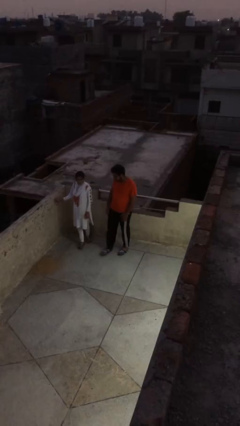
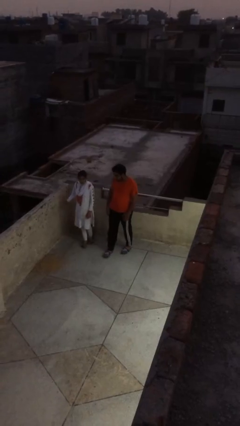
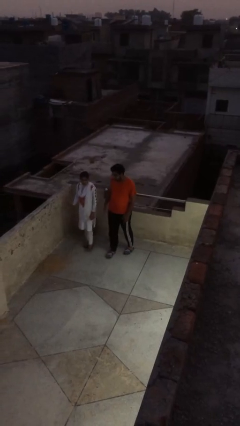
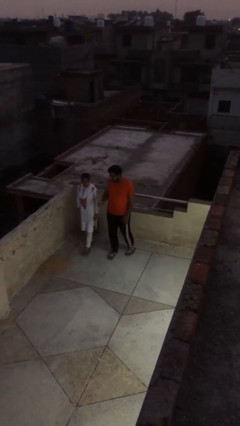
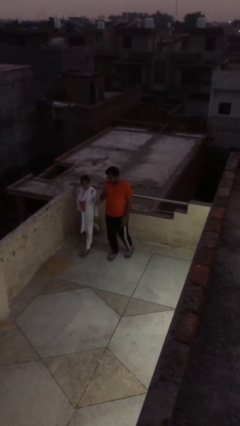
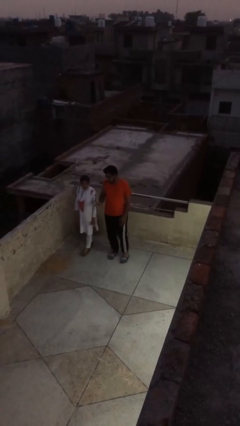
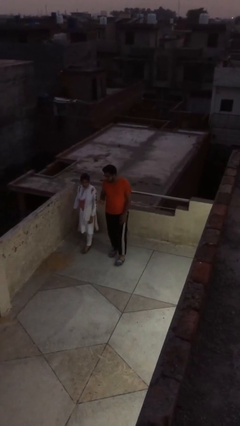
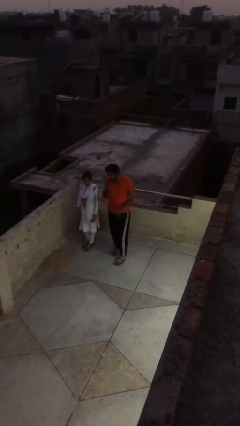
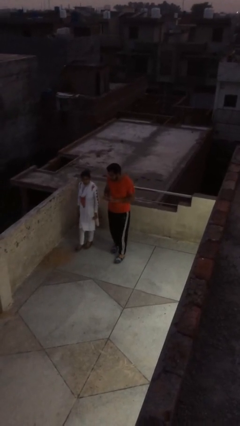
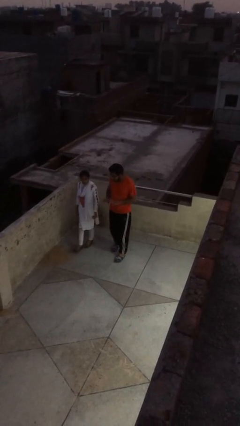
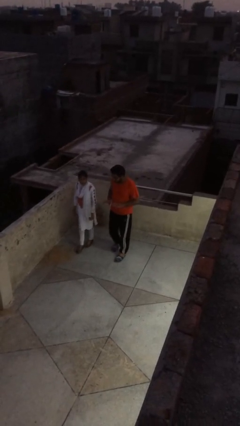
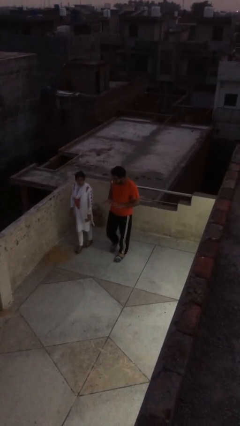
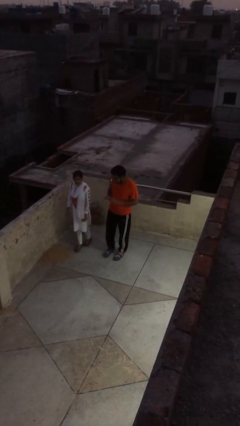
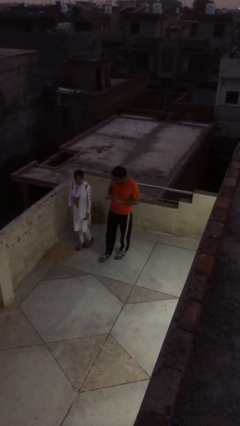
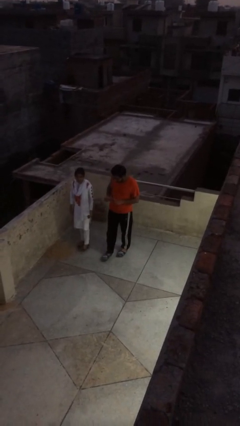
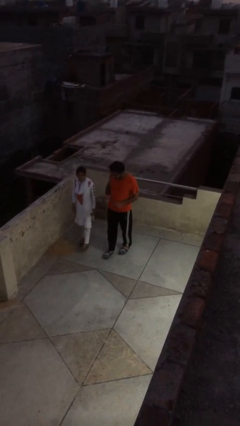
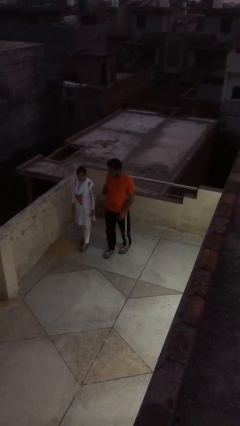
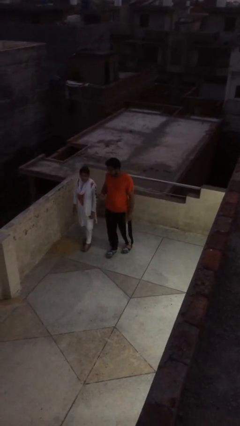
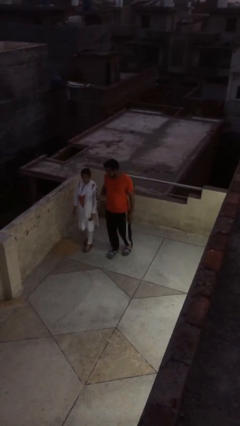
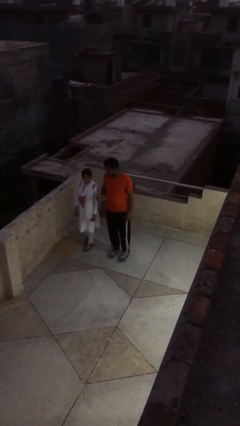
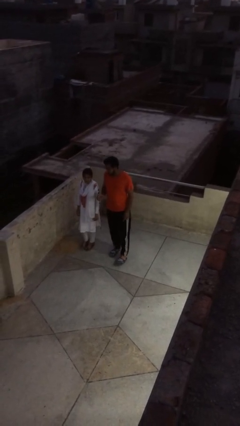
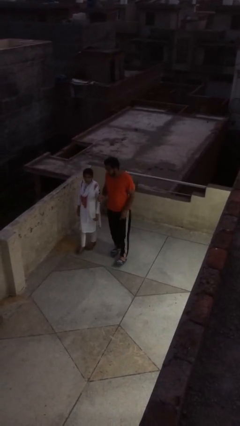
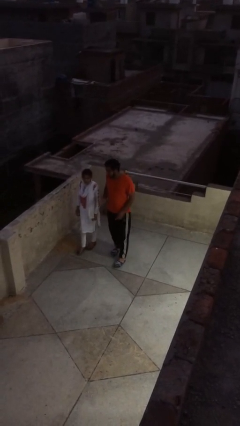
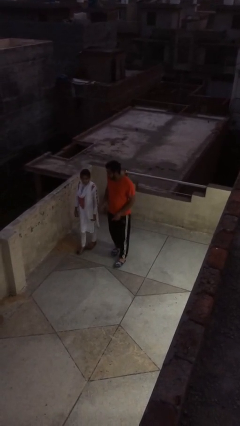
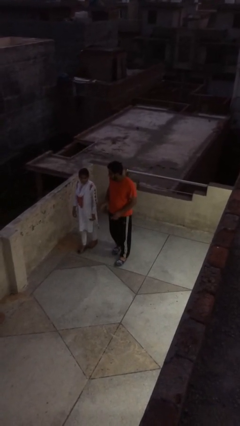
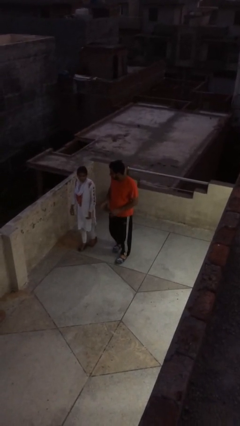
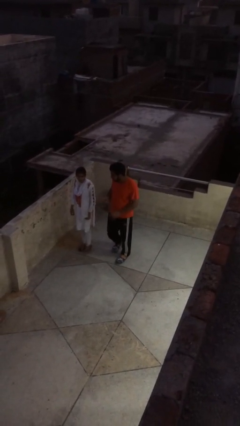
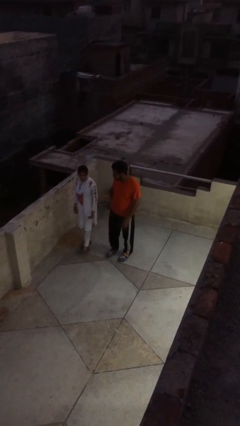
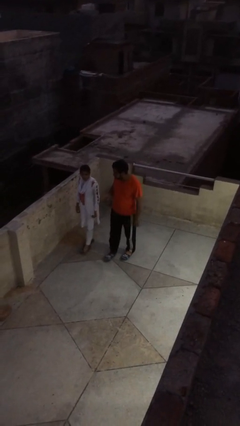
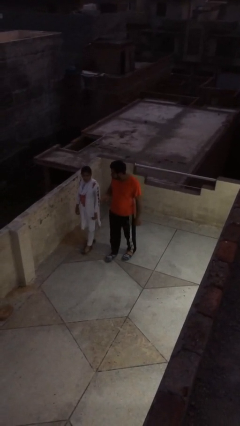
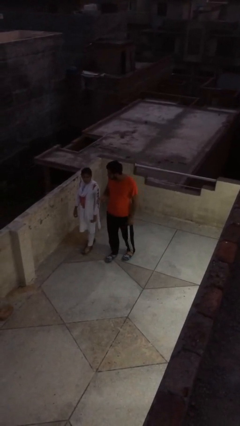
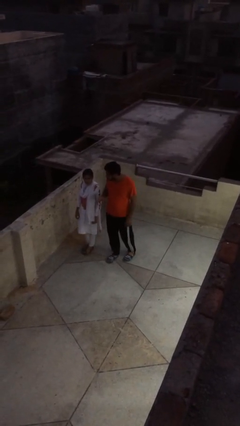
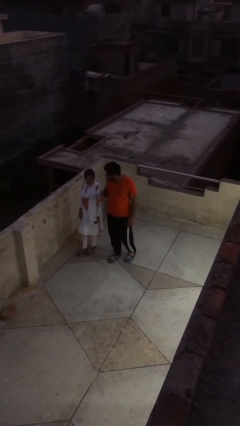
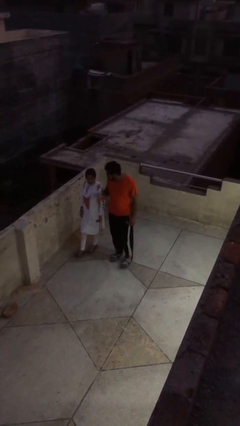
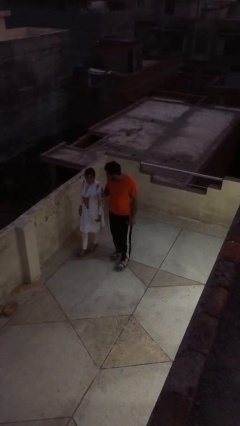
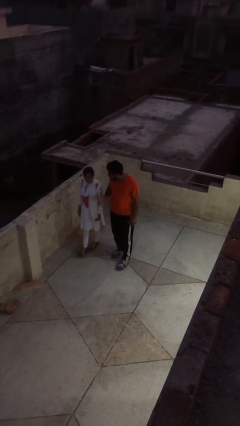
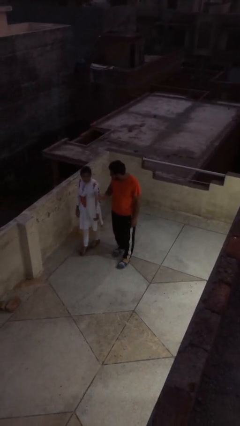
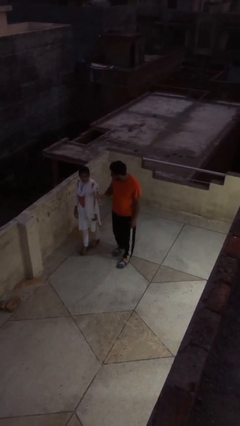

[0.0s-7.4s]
person talks to person

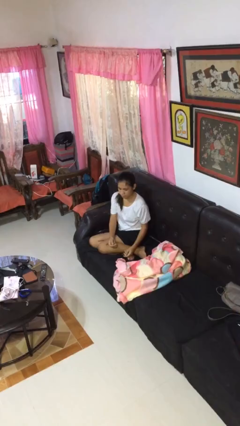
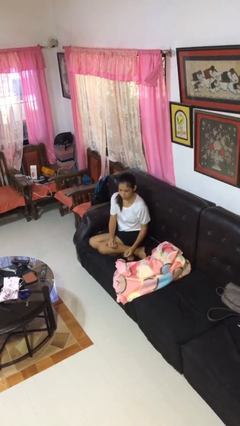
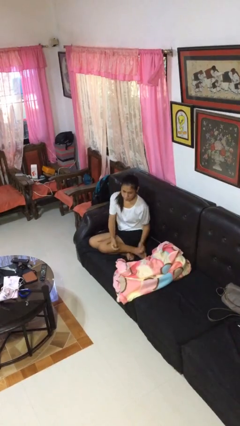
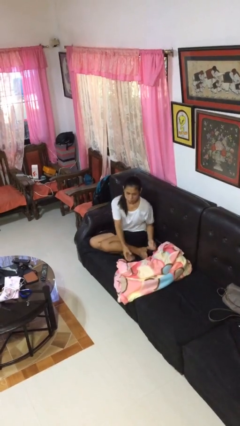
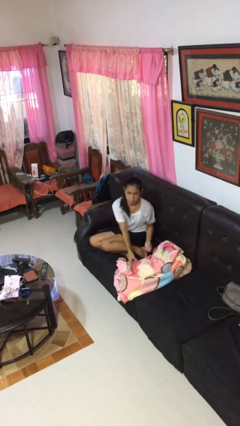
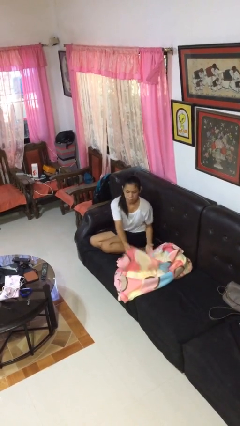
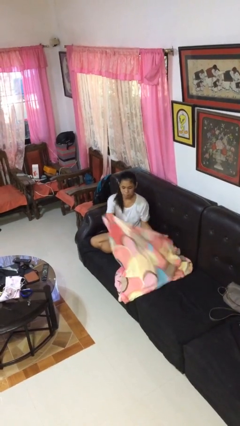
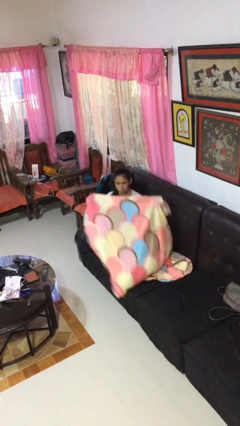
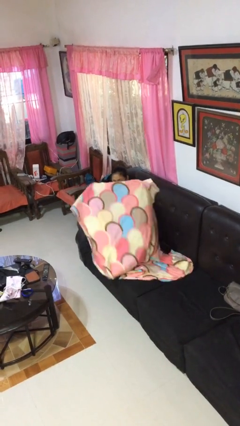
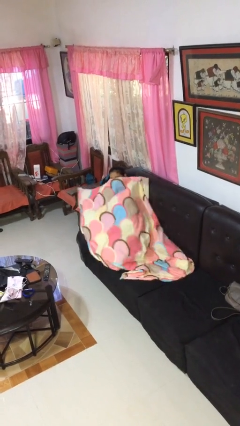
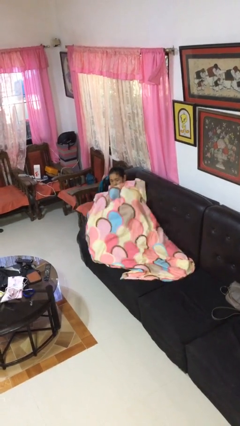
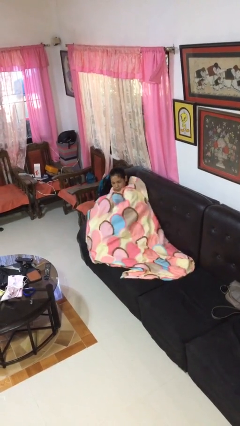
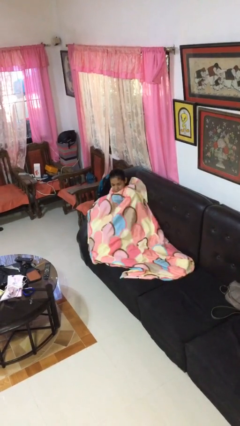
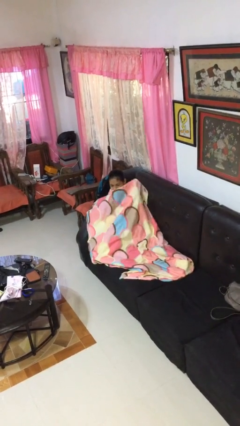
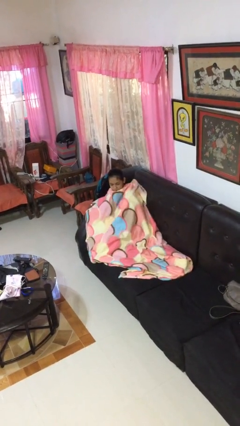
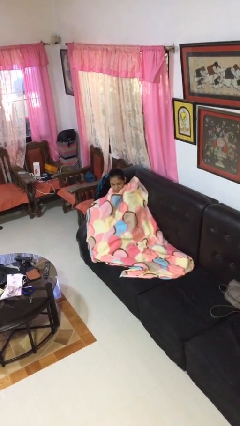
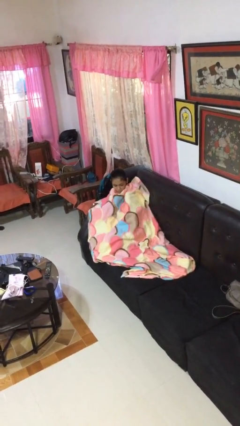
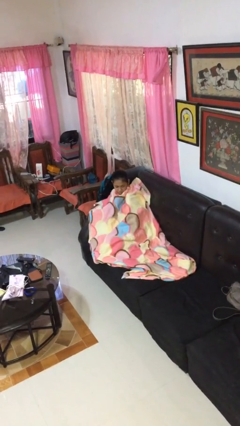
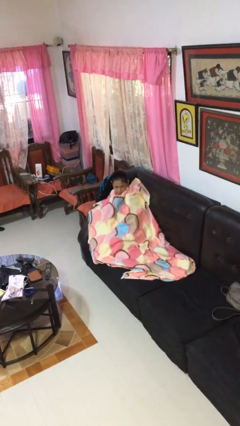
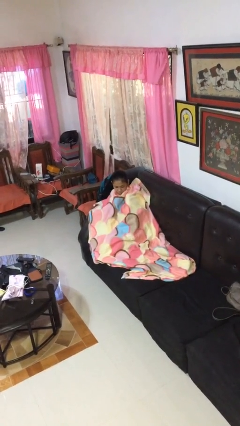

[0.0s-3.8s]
person covers with blanket

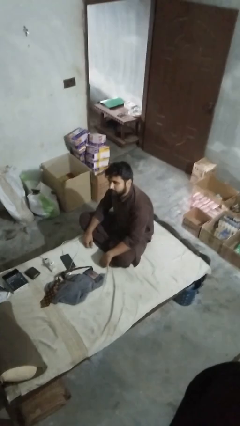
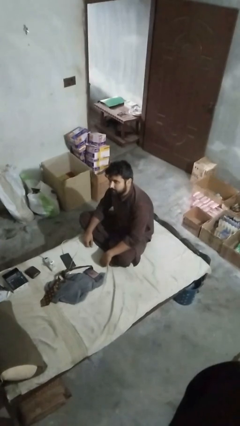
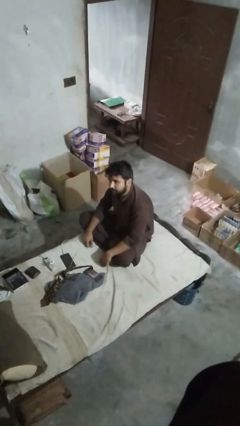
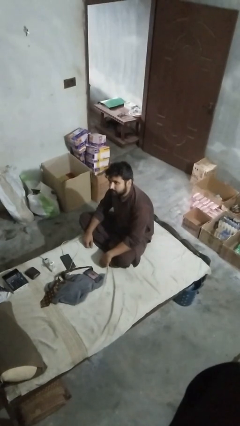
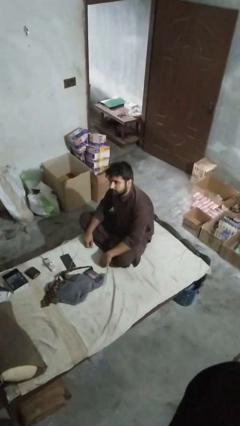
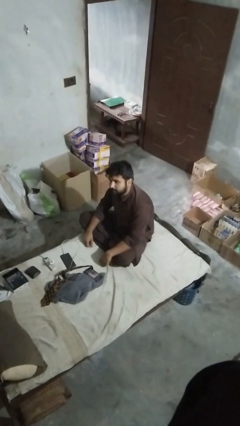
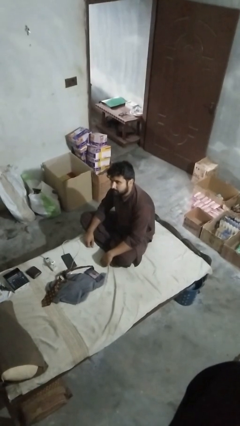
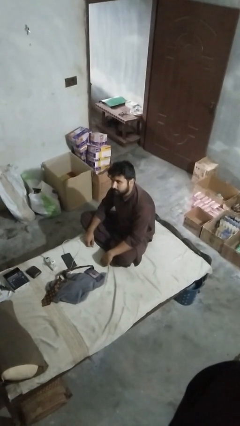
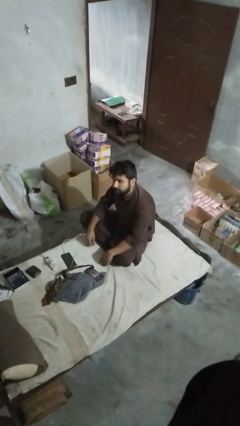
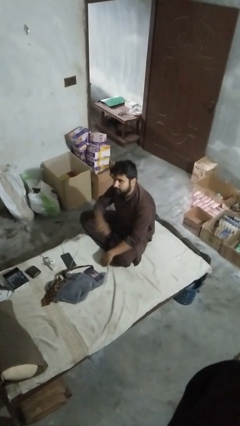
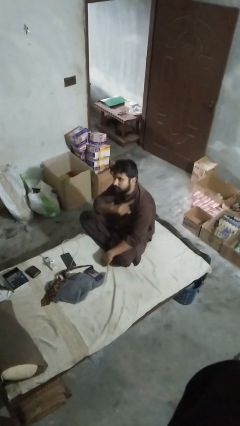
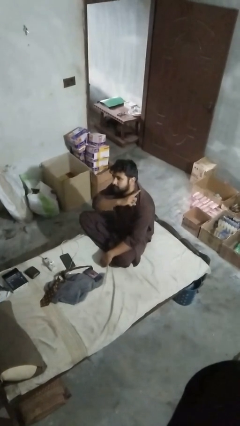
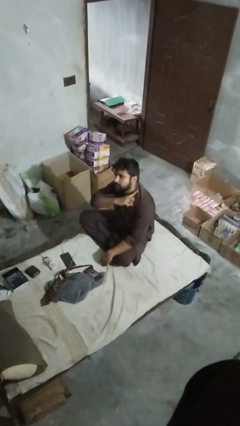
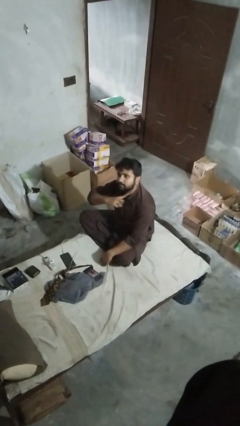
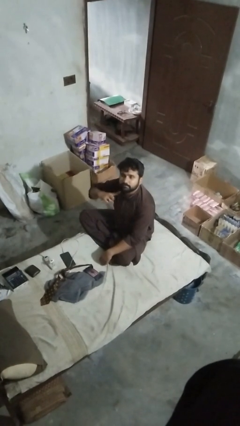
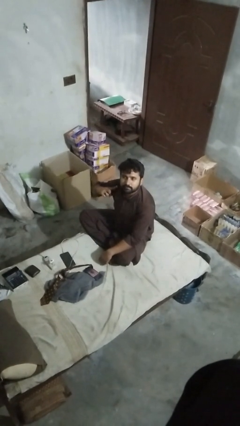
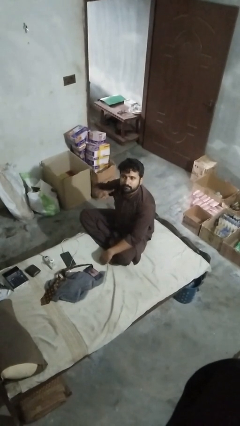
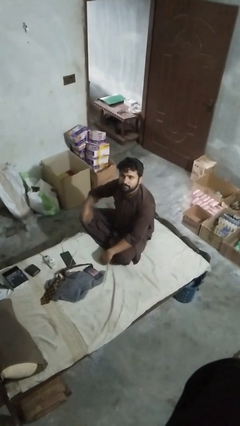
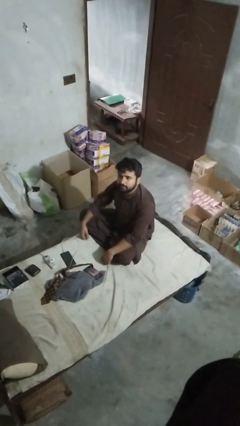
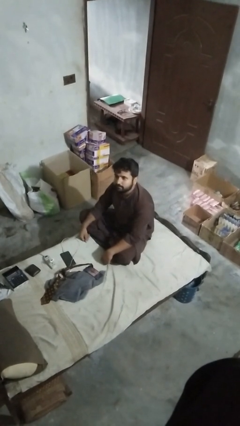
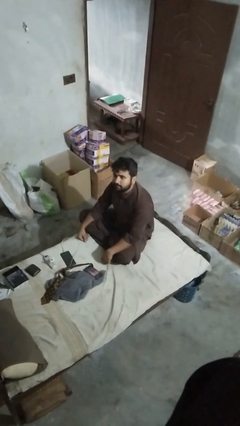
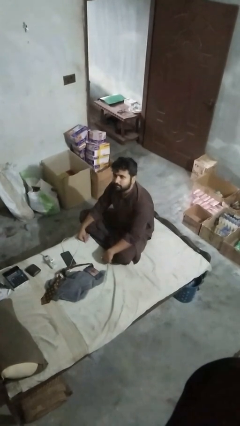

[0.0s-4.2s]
person gestures cut

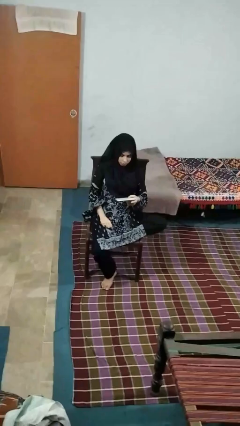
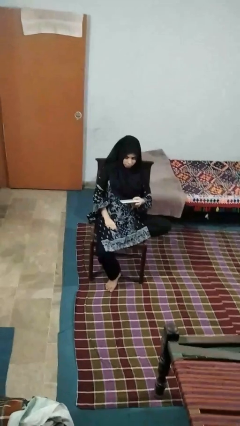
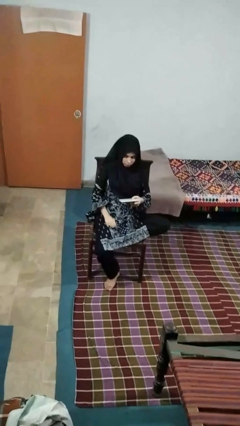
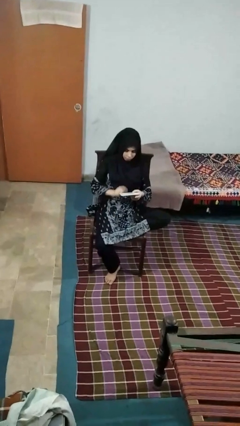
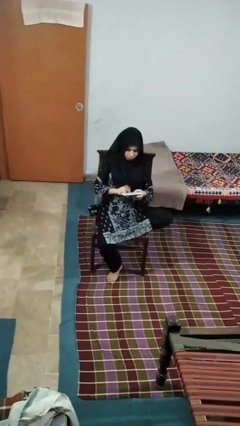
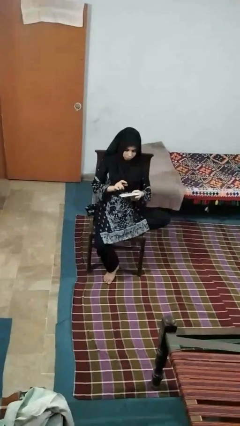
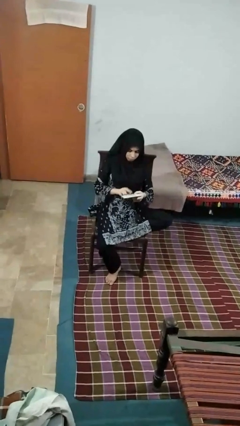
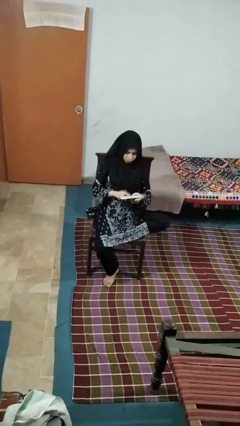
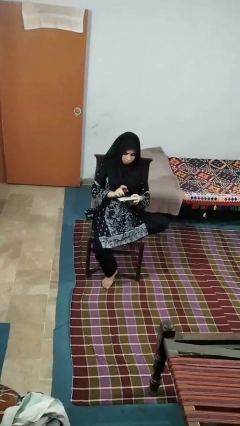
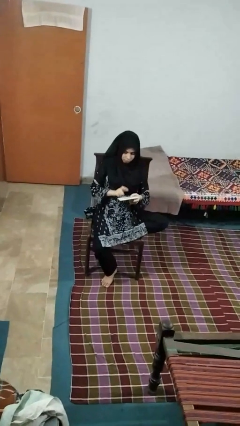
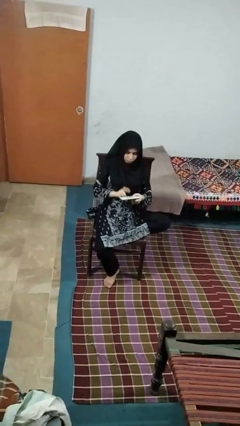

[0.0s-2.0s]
person taps object with finger

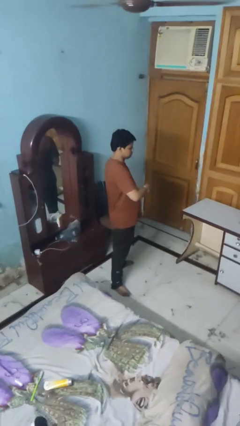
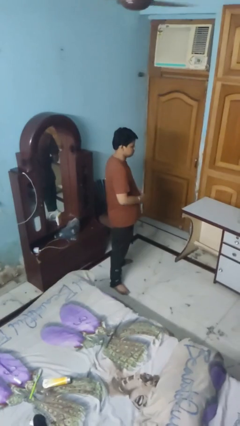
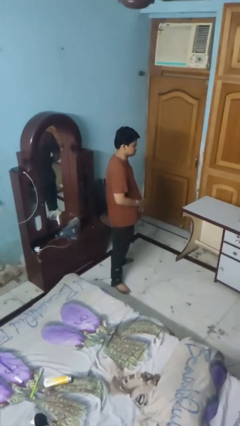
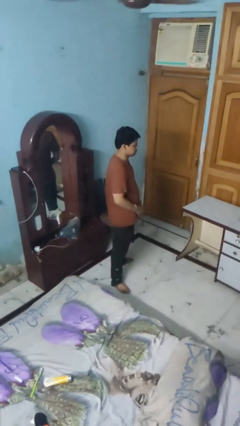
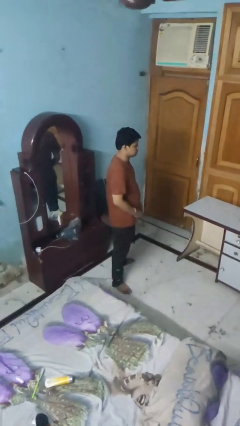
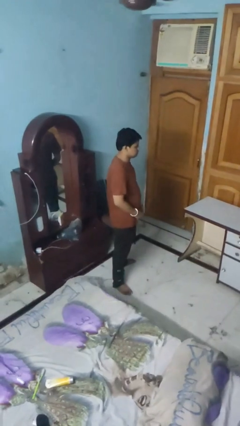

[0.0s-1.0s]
person takes off wristwatch
